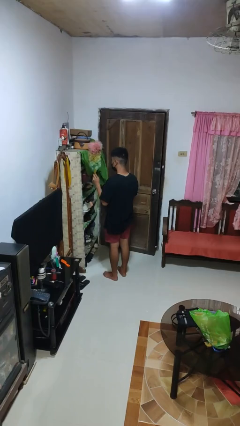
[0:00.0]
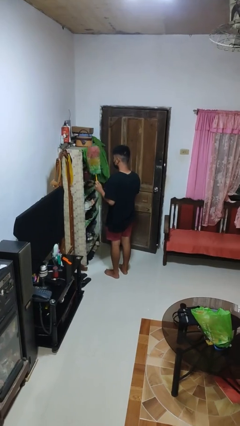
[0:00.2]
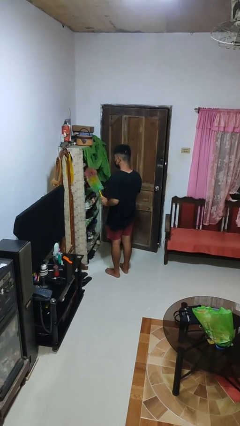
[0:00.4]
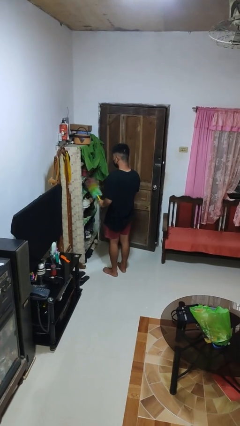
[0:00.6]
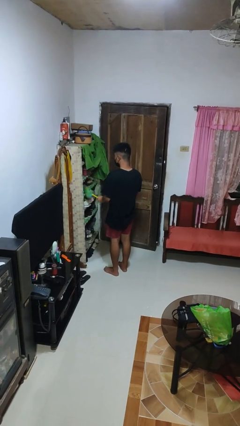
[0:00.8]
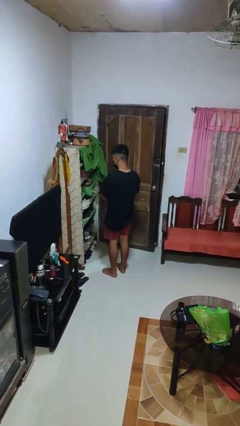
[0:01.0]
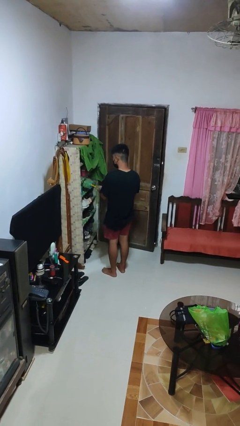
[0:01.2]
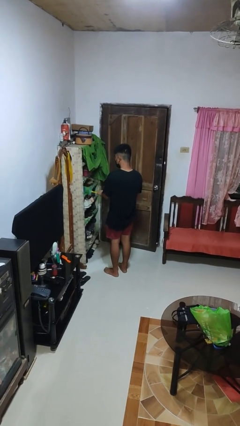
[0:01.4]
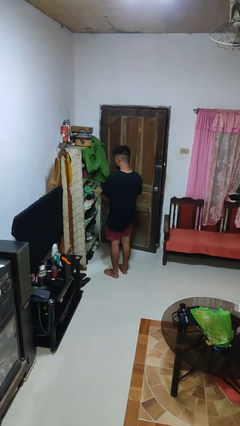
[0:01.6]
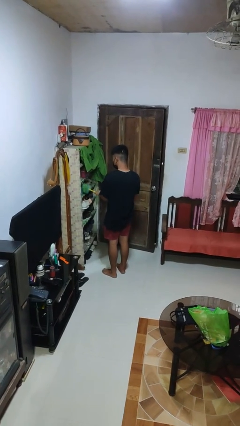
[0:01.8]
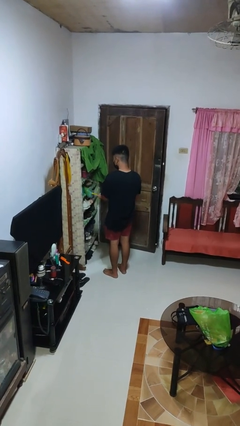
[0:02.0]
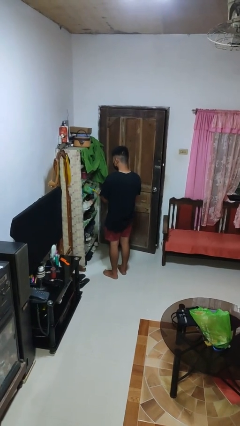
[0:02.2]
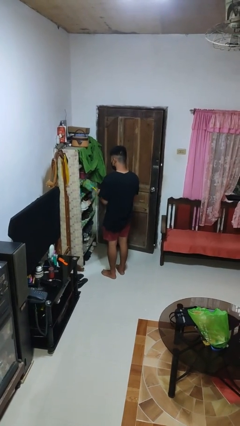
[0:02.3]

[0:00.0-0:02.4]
person dusts furniture

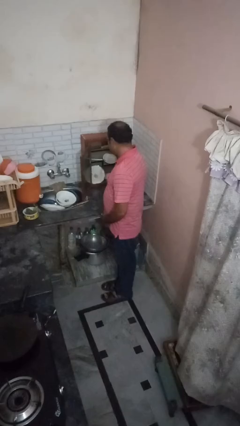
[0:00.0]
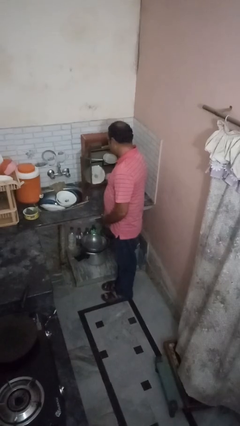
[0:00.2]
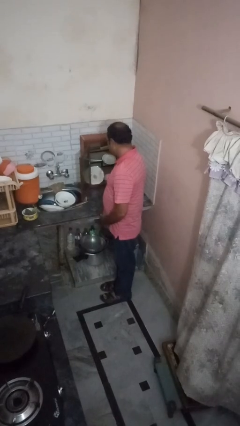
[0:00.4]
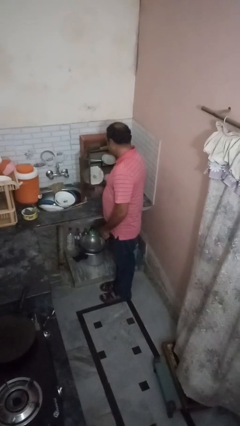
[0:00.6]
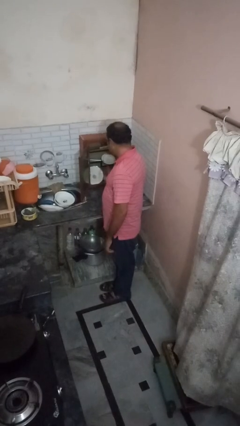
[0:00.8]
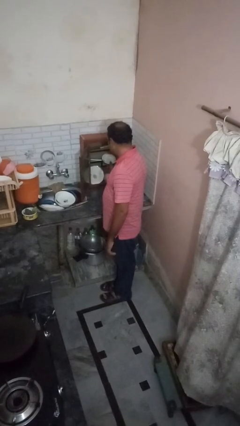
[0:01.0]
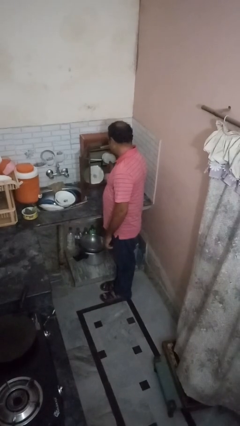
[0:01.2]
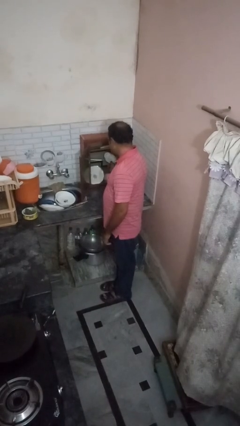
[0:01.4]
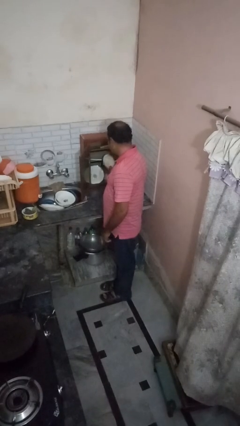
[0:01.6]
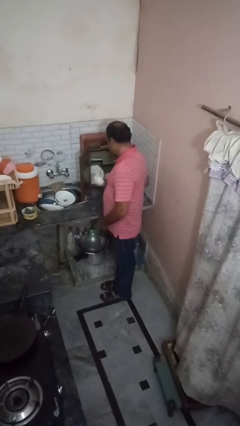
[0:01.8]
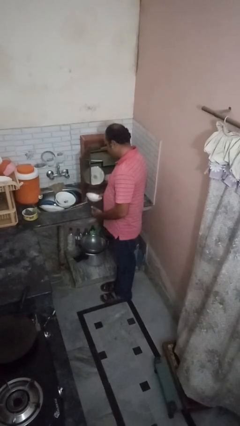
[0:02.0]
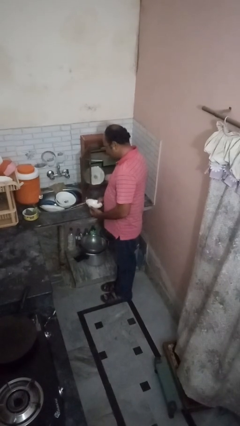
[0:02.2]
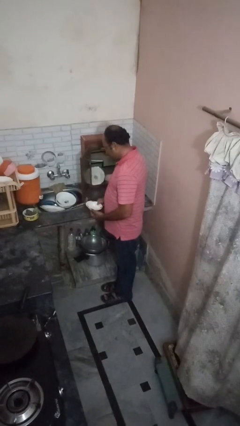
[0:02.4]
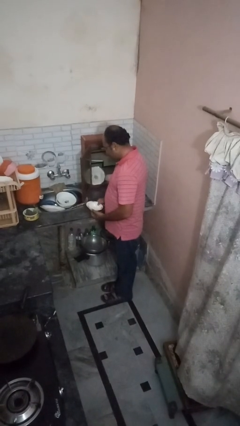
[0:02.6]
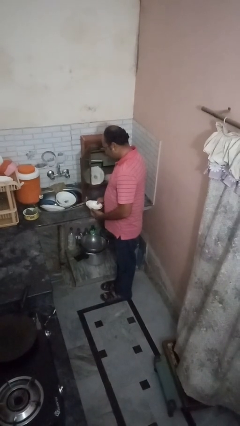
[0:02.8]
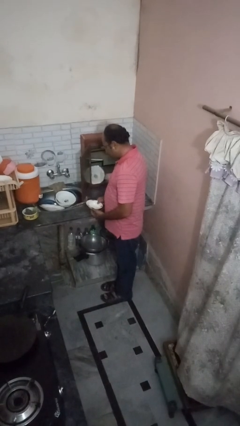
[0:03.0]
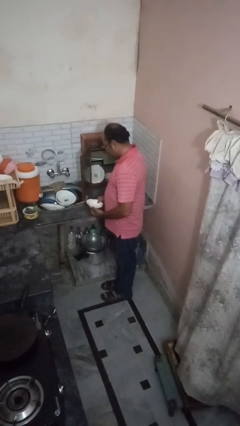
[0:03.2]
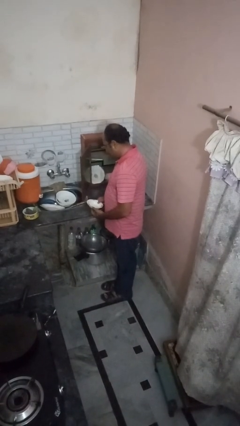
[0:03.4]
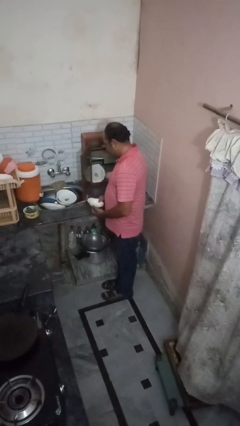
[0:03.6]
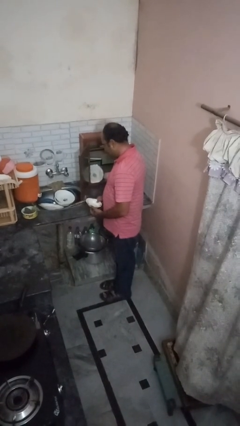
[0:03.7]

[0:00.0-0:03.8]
person puts object in cabinet

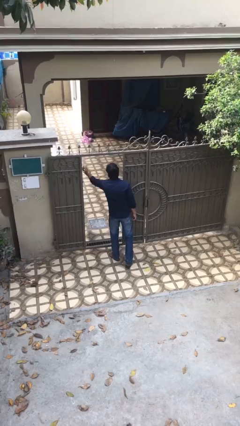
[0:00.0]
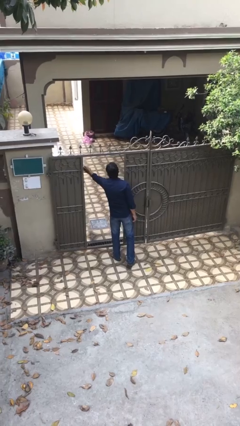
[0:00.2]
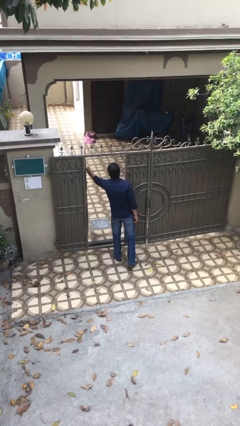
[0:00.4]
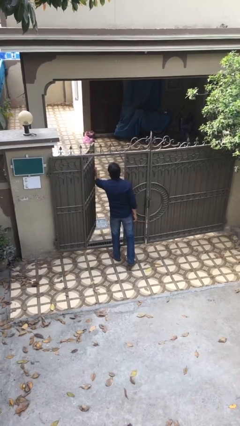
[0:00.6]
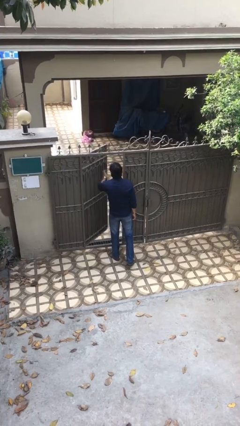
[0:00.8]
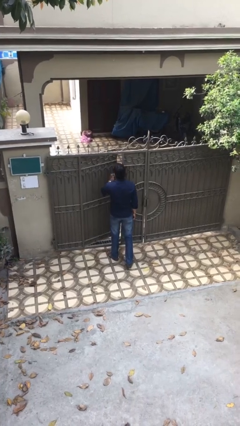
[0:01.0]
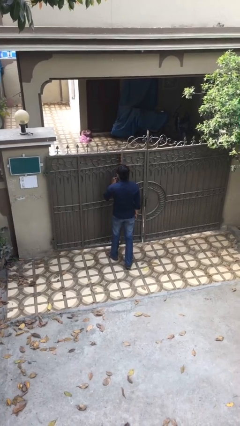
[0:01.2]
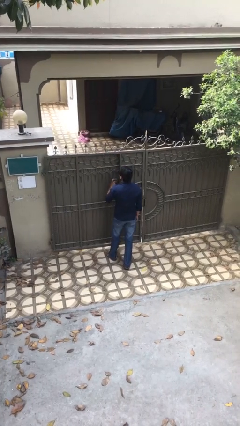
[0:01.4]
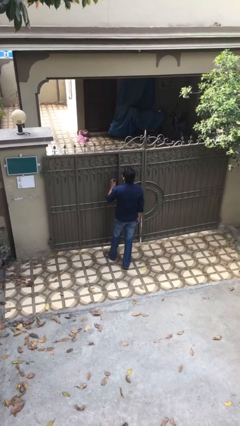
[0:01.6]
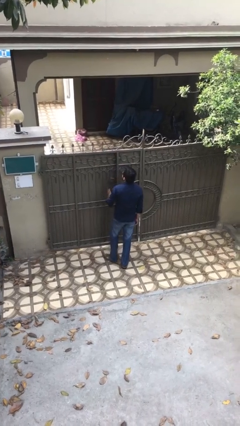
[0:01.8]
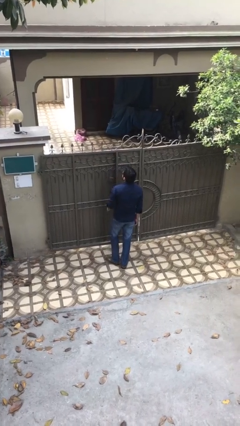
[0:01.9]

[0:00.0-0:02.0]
person closes facility door

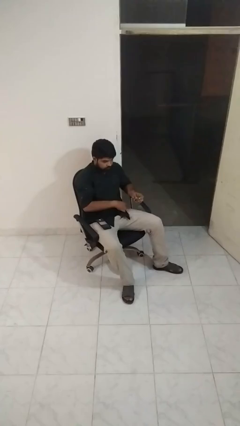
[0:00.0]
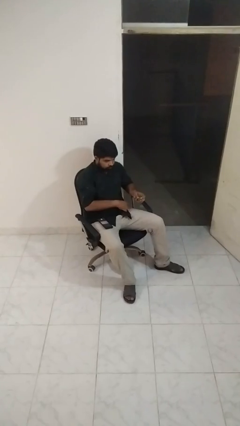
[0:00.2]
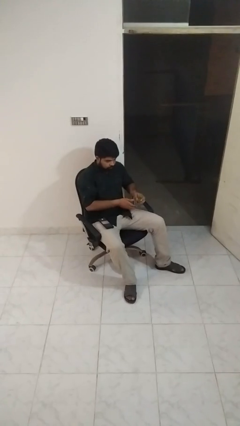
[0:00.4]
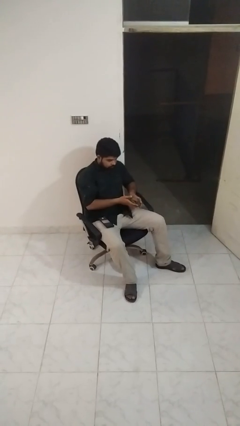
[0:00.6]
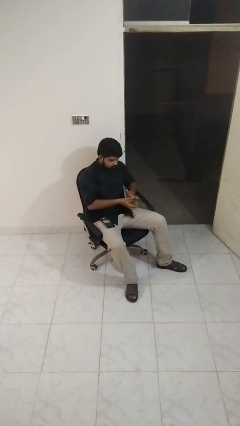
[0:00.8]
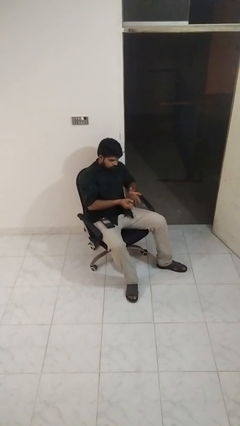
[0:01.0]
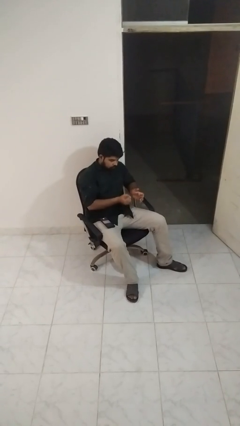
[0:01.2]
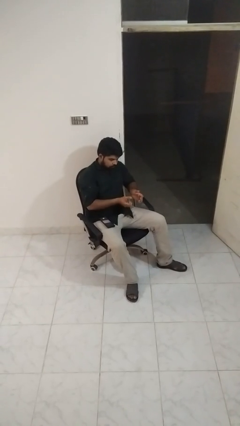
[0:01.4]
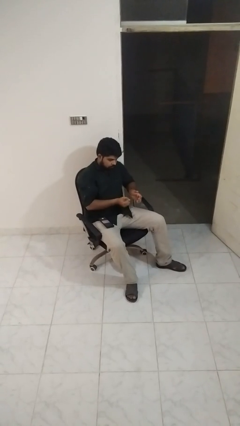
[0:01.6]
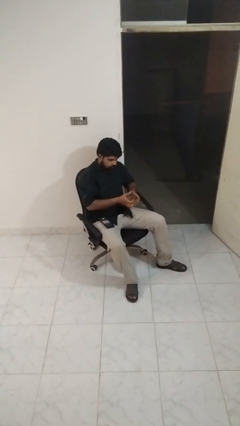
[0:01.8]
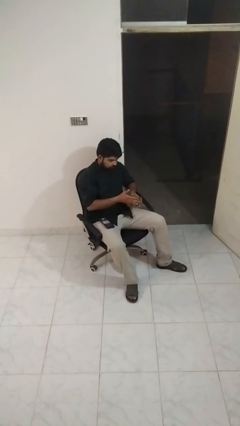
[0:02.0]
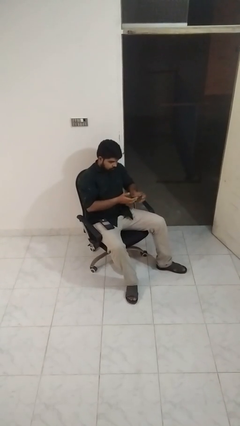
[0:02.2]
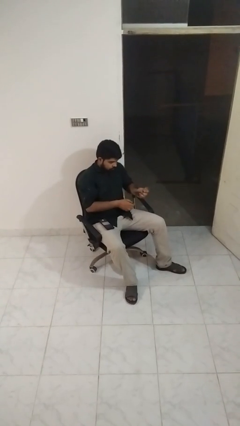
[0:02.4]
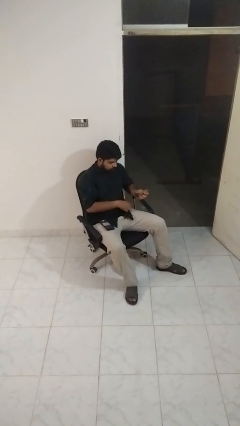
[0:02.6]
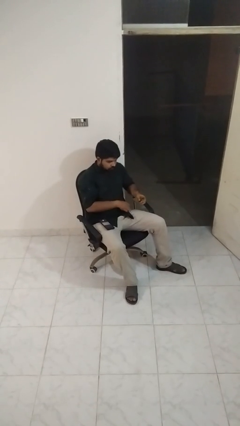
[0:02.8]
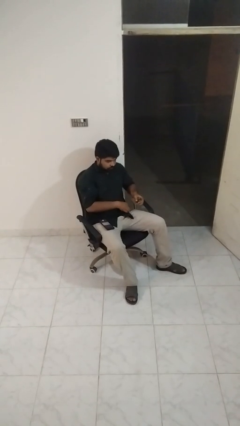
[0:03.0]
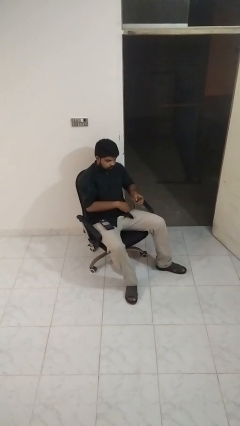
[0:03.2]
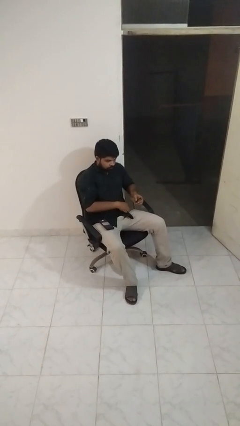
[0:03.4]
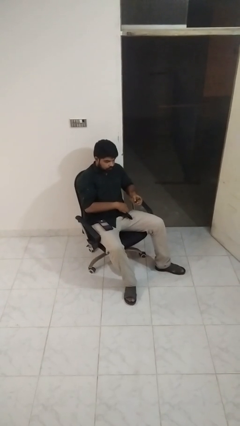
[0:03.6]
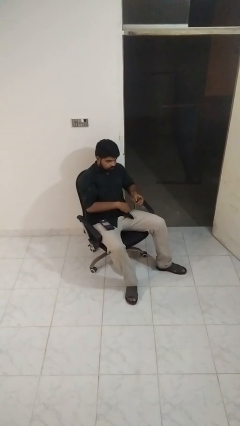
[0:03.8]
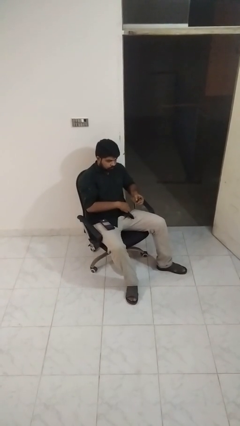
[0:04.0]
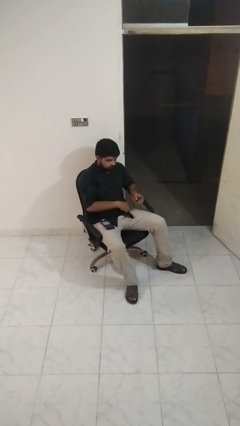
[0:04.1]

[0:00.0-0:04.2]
person squeezes object

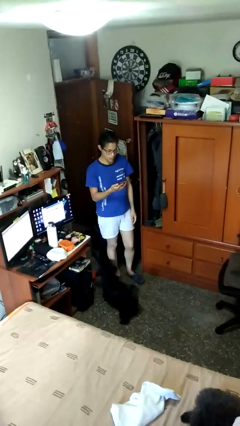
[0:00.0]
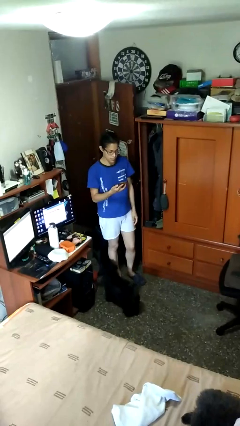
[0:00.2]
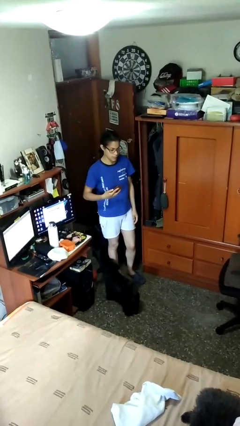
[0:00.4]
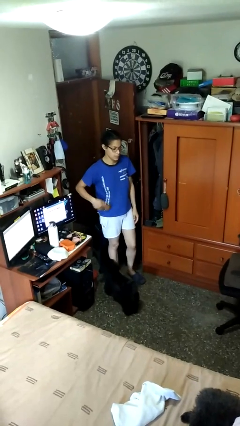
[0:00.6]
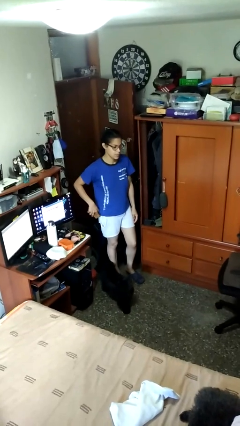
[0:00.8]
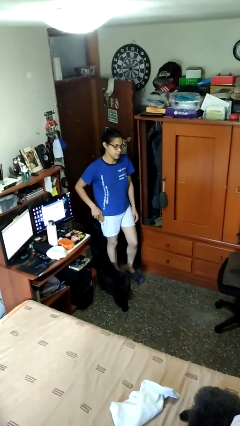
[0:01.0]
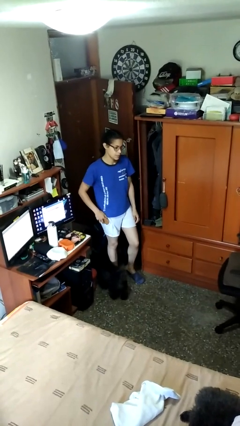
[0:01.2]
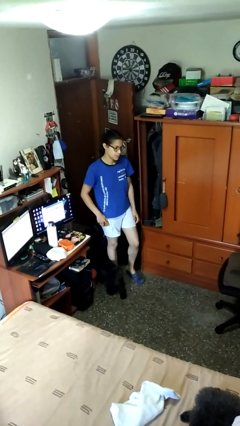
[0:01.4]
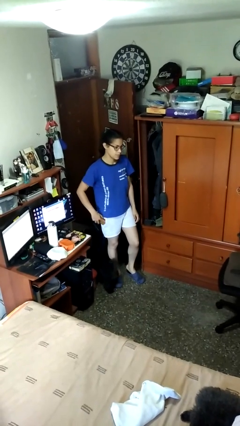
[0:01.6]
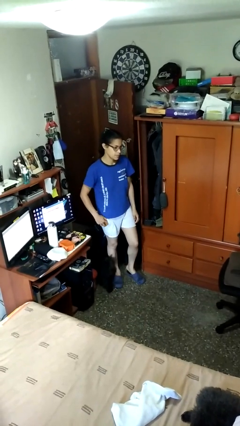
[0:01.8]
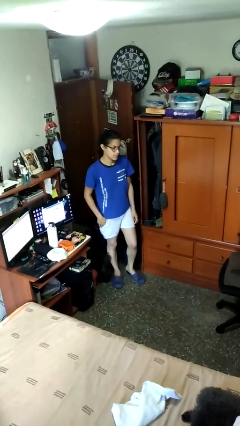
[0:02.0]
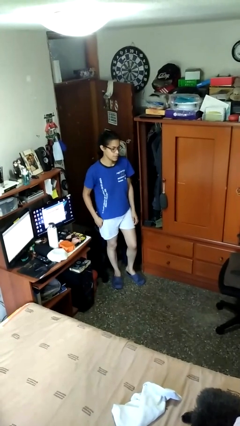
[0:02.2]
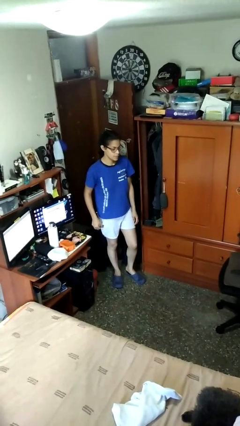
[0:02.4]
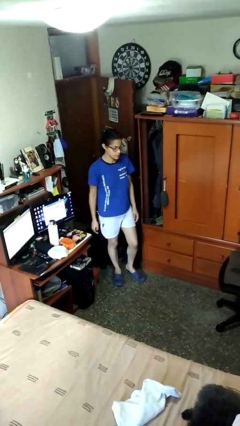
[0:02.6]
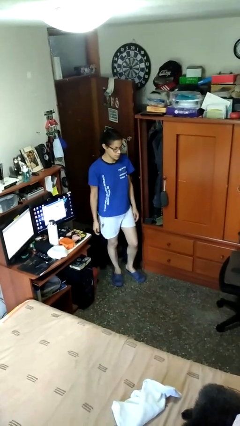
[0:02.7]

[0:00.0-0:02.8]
person puts phone into pocket

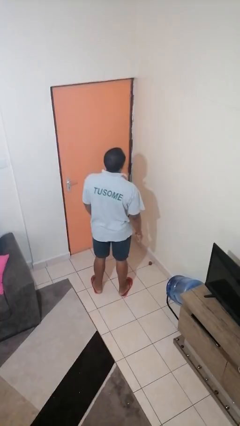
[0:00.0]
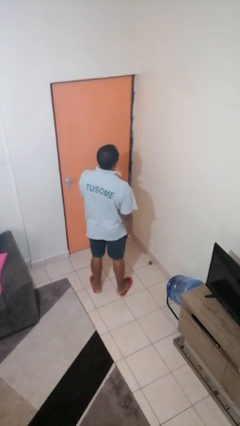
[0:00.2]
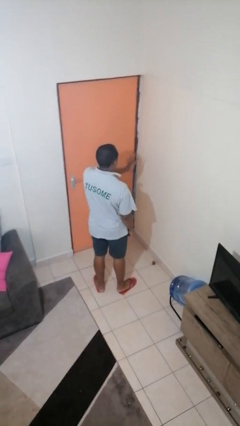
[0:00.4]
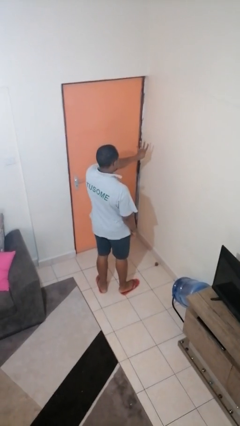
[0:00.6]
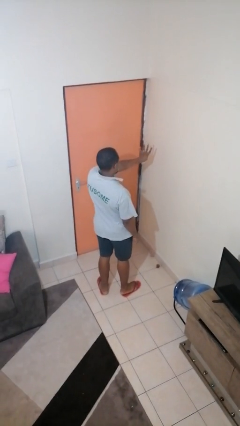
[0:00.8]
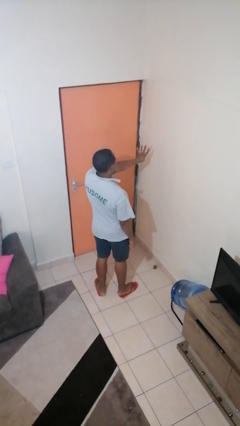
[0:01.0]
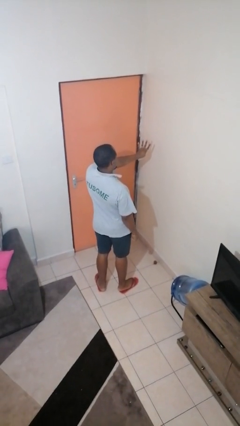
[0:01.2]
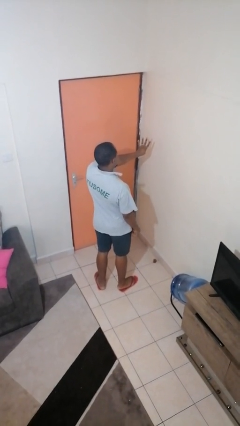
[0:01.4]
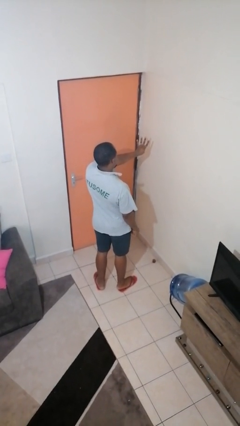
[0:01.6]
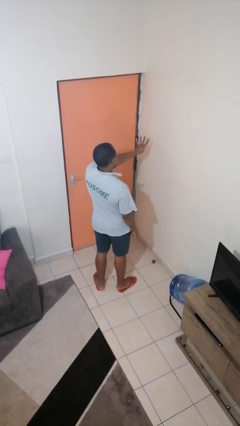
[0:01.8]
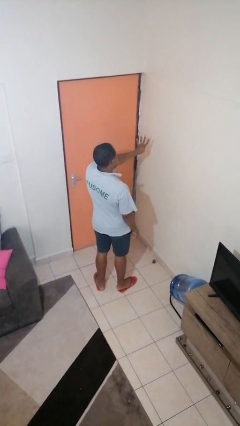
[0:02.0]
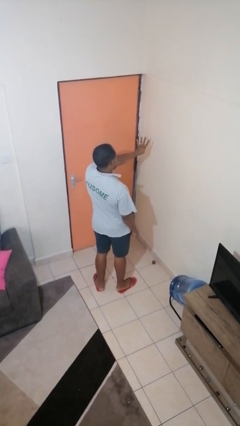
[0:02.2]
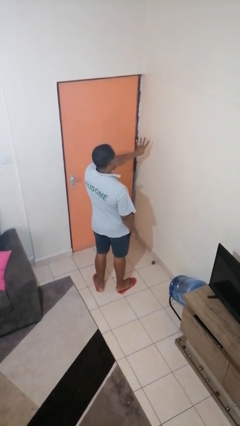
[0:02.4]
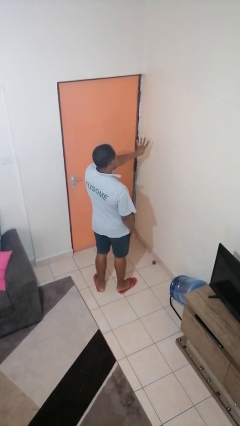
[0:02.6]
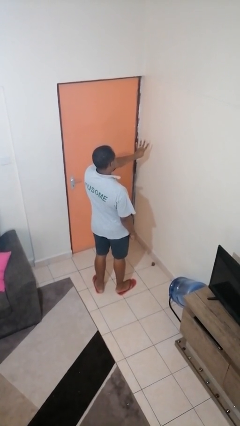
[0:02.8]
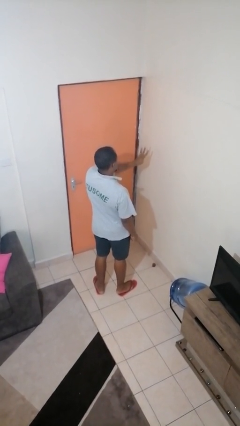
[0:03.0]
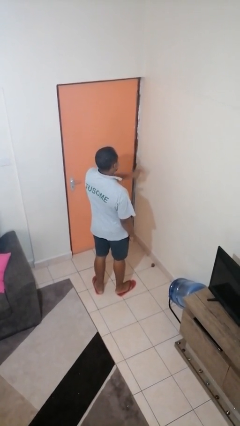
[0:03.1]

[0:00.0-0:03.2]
person gestures number four
